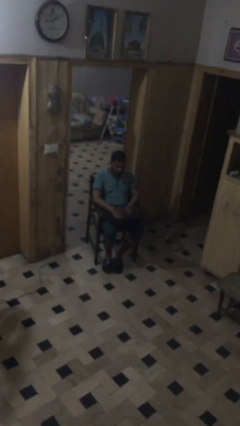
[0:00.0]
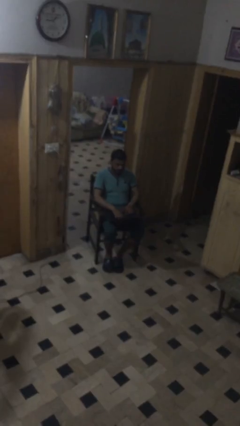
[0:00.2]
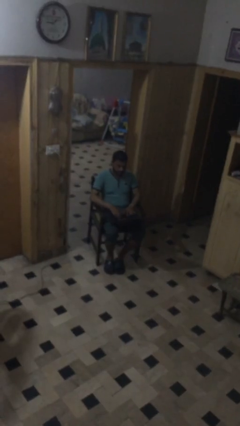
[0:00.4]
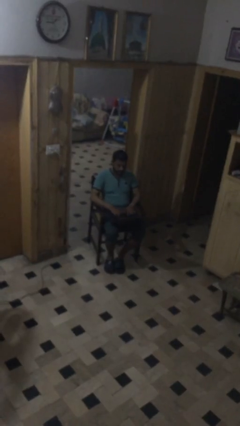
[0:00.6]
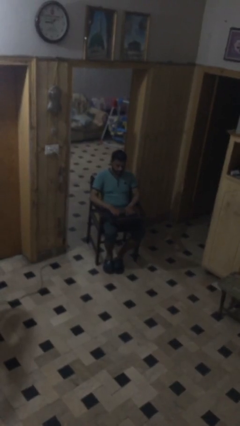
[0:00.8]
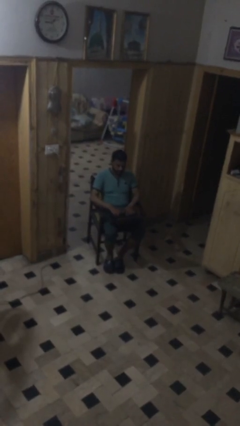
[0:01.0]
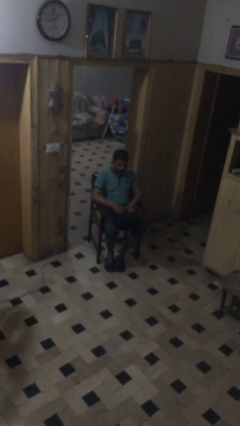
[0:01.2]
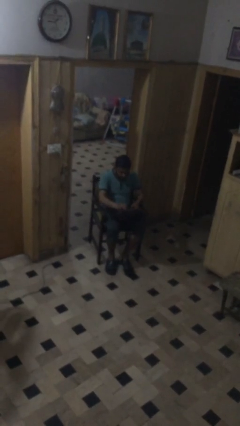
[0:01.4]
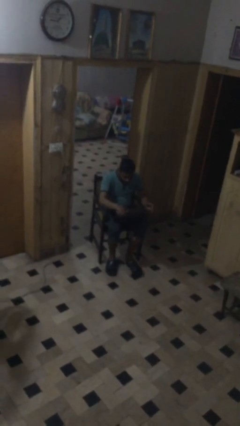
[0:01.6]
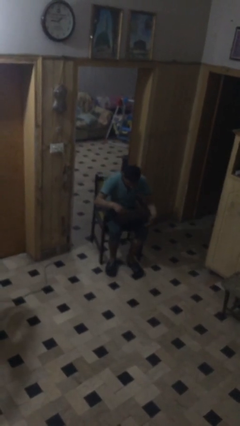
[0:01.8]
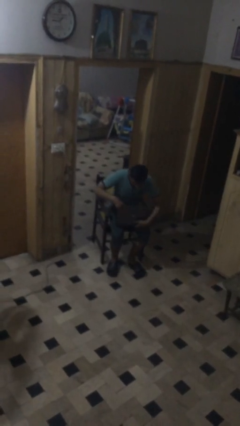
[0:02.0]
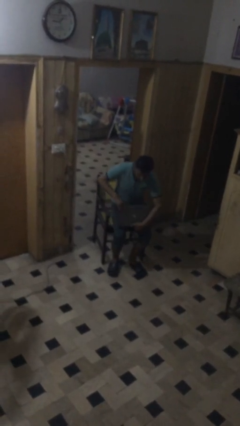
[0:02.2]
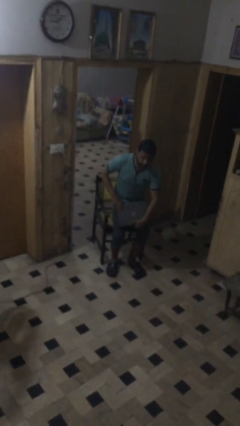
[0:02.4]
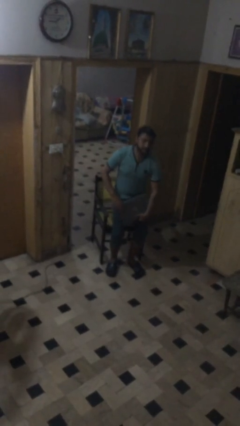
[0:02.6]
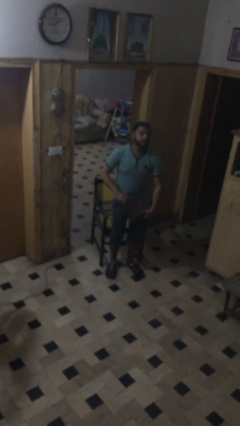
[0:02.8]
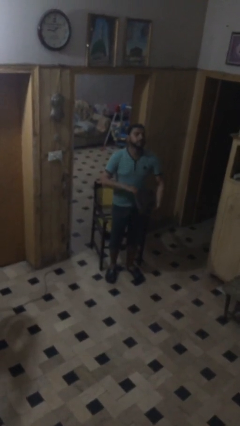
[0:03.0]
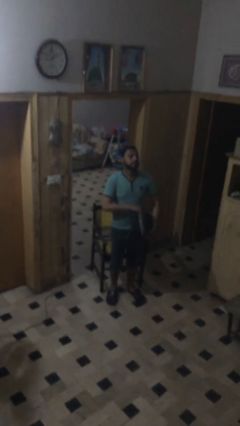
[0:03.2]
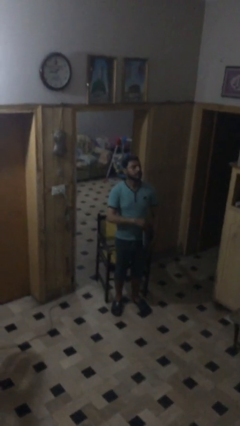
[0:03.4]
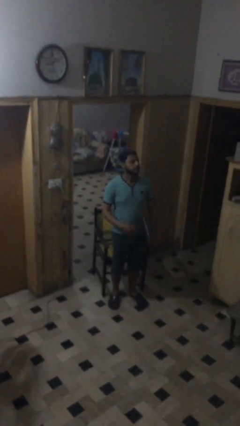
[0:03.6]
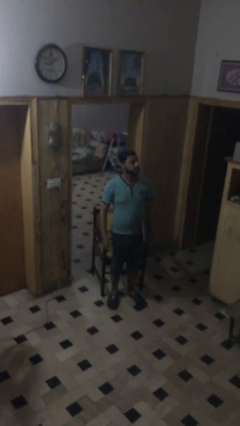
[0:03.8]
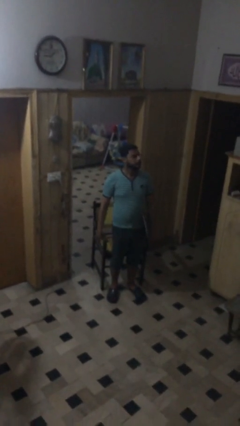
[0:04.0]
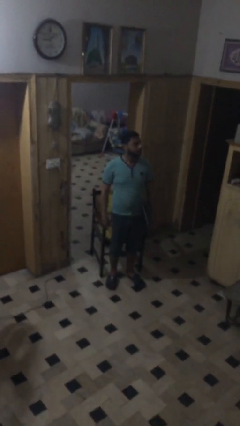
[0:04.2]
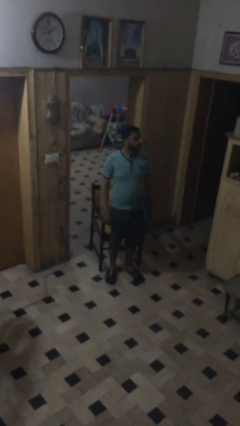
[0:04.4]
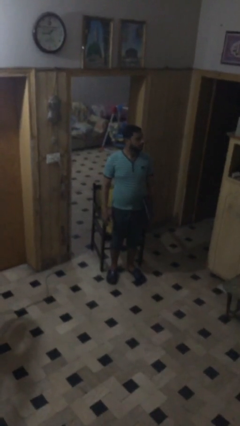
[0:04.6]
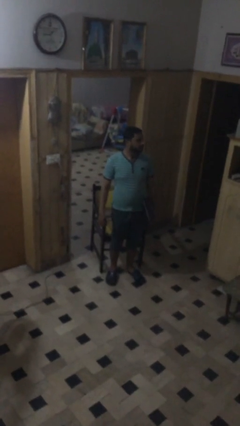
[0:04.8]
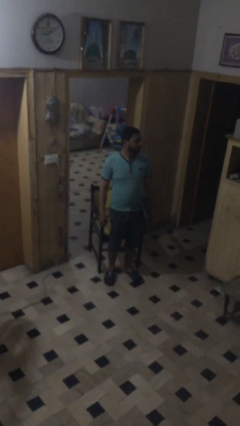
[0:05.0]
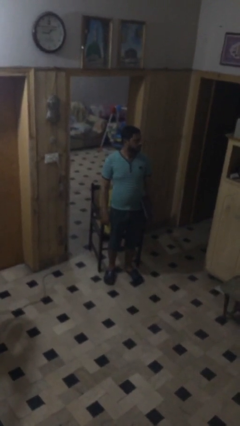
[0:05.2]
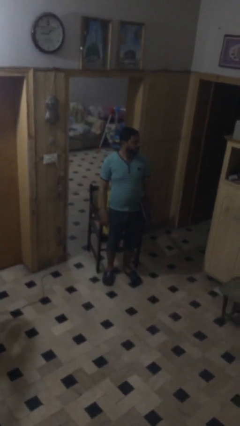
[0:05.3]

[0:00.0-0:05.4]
person stands up

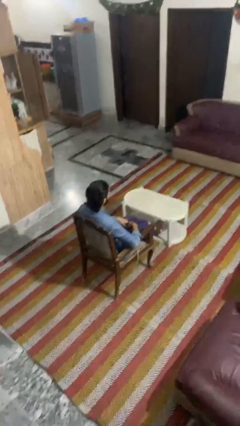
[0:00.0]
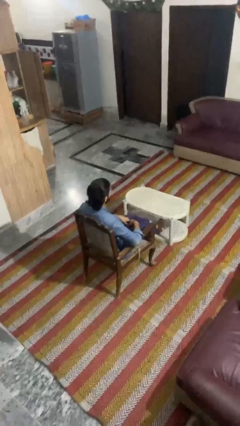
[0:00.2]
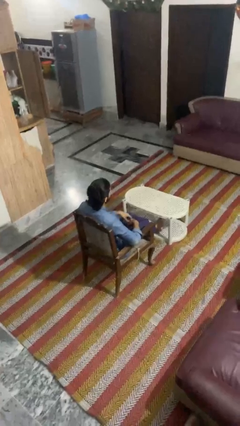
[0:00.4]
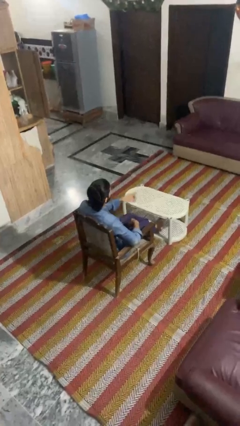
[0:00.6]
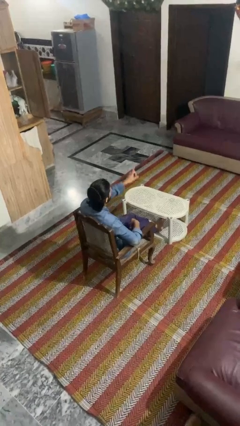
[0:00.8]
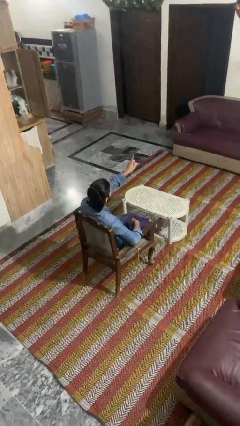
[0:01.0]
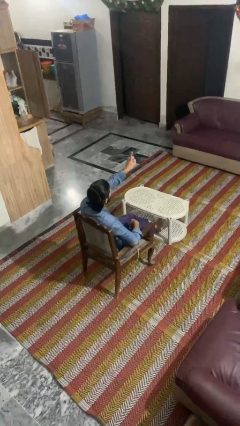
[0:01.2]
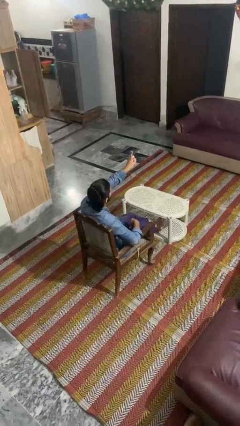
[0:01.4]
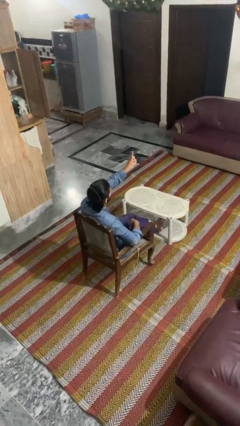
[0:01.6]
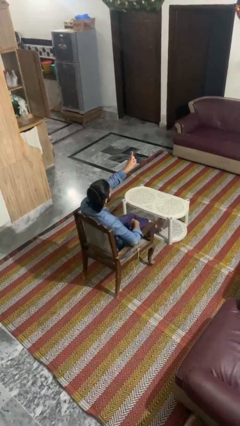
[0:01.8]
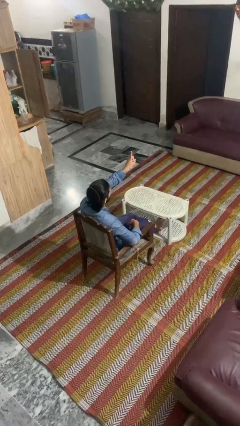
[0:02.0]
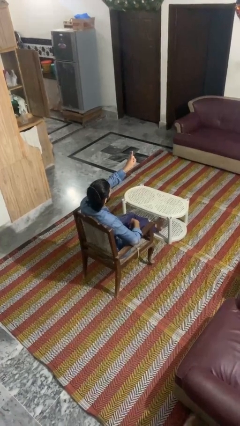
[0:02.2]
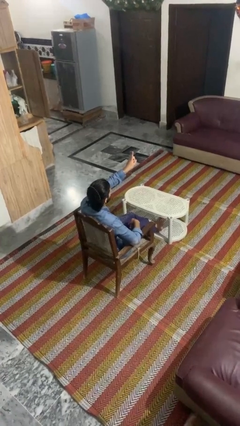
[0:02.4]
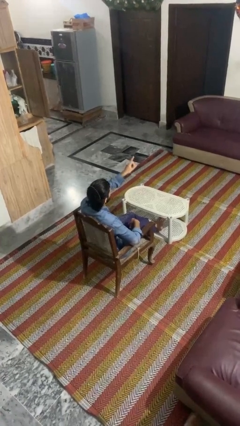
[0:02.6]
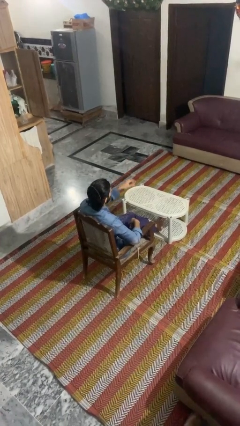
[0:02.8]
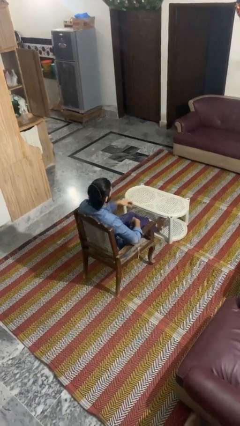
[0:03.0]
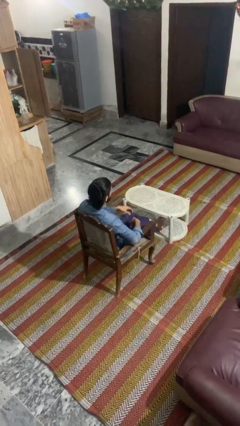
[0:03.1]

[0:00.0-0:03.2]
person gestures number one

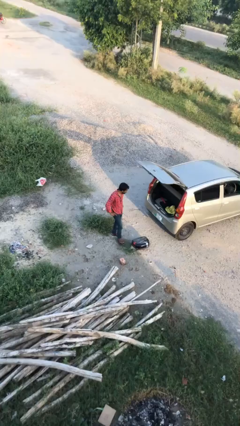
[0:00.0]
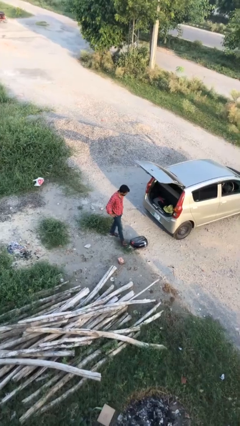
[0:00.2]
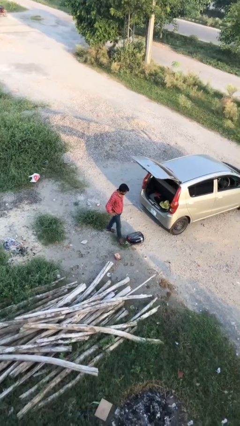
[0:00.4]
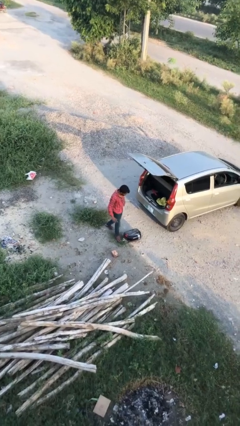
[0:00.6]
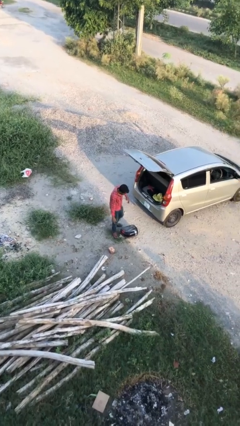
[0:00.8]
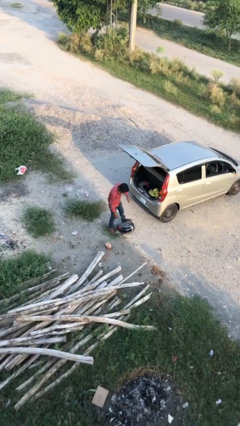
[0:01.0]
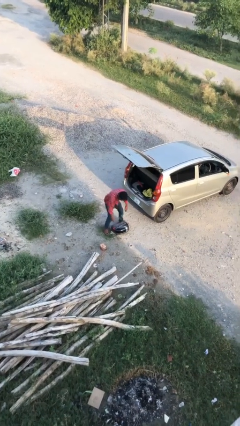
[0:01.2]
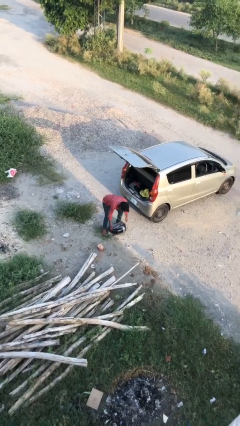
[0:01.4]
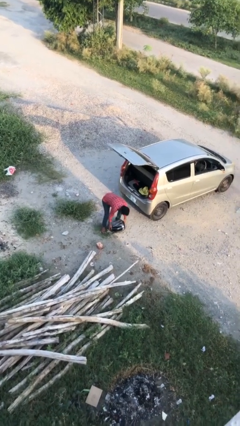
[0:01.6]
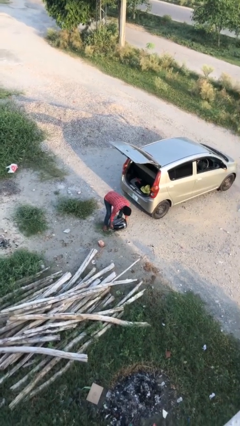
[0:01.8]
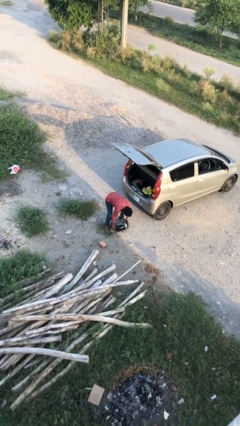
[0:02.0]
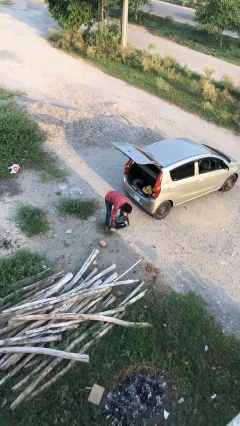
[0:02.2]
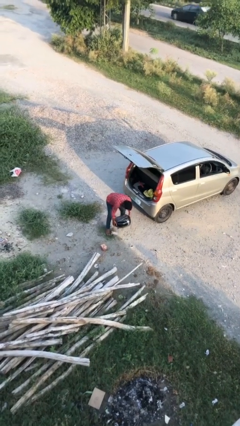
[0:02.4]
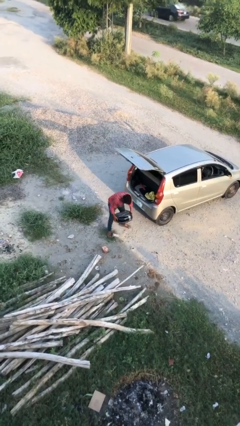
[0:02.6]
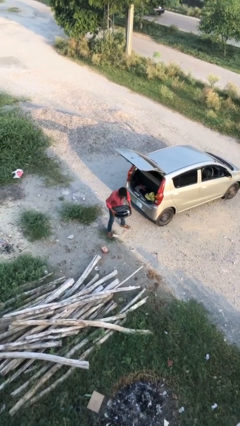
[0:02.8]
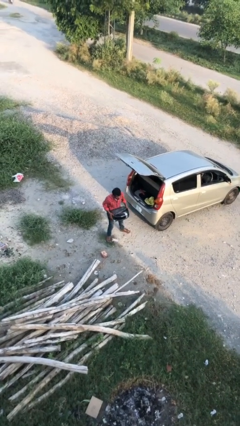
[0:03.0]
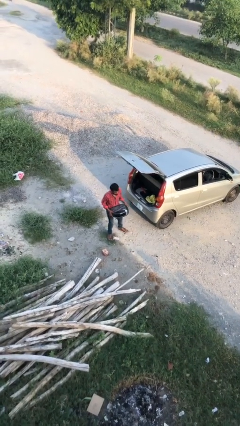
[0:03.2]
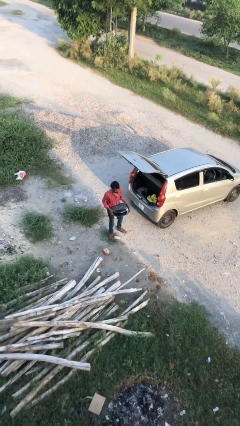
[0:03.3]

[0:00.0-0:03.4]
person picks up object from floor

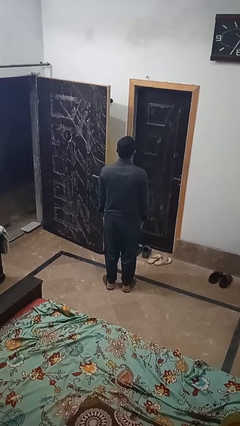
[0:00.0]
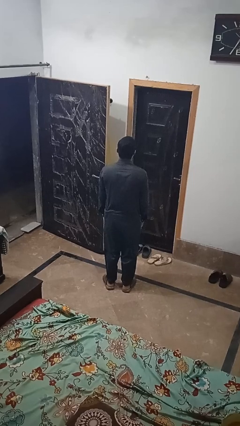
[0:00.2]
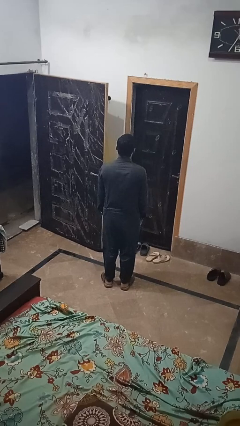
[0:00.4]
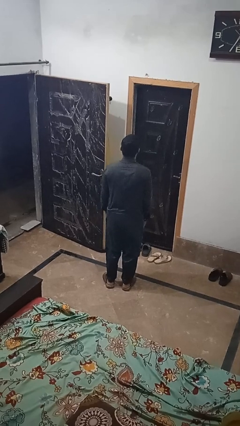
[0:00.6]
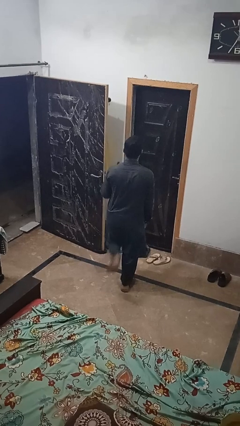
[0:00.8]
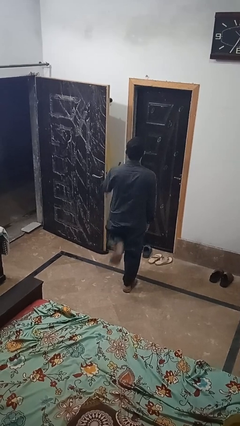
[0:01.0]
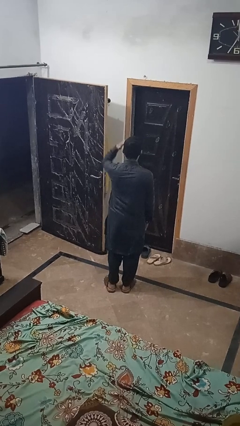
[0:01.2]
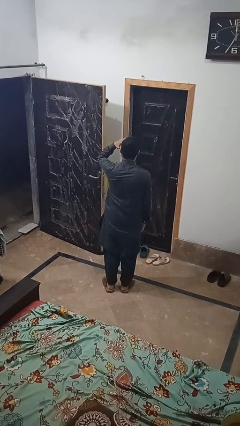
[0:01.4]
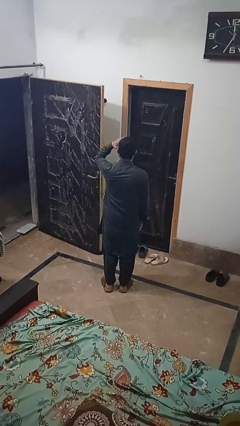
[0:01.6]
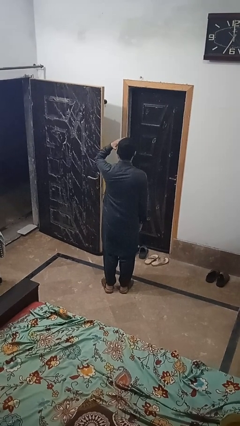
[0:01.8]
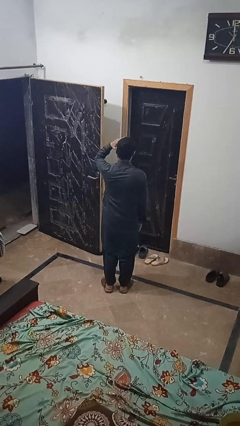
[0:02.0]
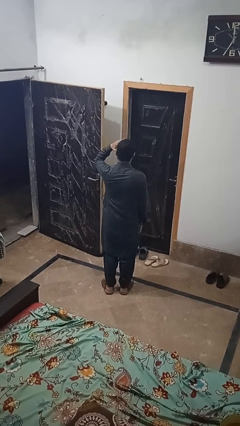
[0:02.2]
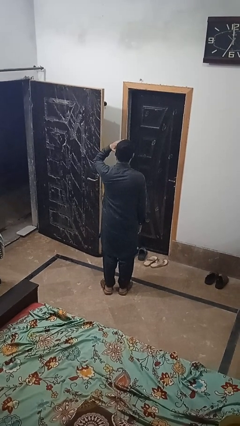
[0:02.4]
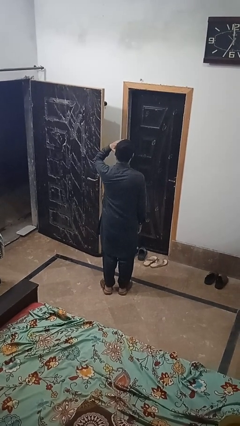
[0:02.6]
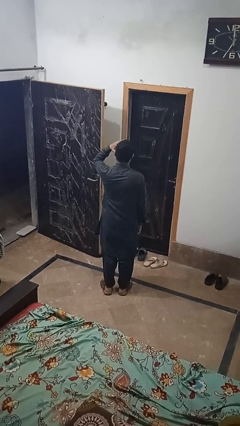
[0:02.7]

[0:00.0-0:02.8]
person salutes

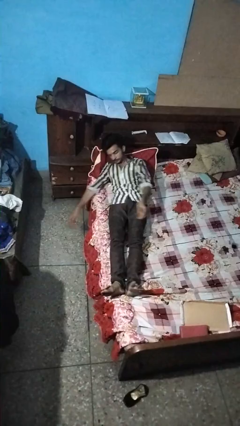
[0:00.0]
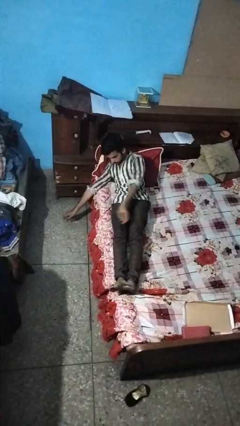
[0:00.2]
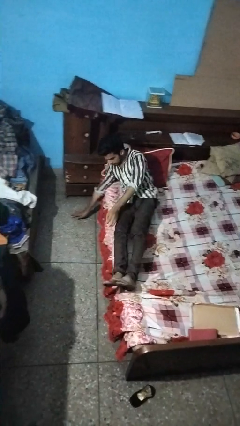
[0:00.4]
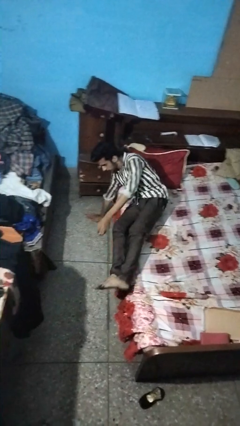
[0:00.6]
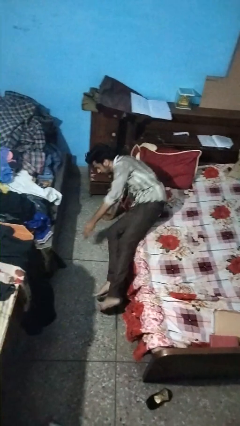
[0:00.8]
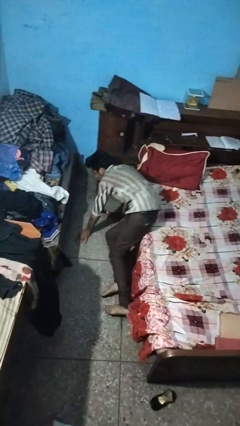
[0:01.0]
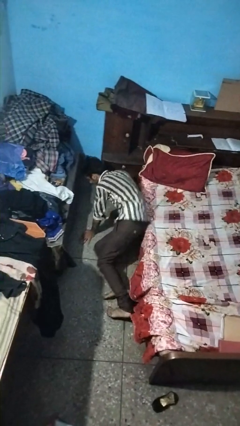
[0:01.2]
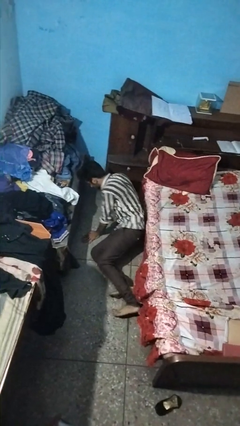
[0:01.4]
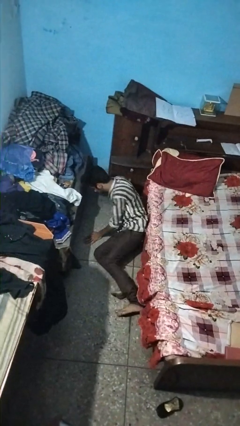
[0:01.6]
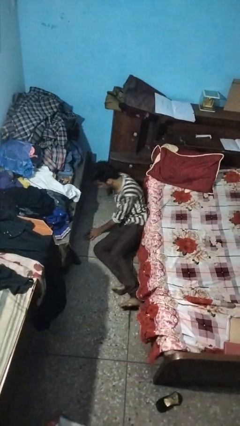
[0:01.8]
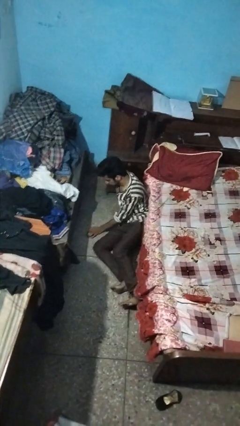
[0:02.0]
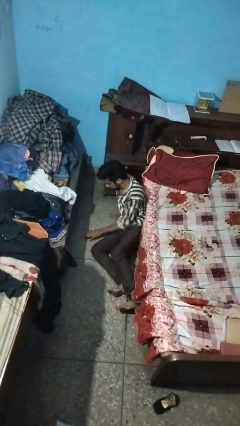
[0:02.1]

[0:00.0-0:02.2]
person falls from bed

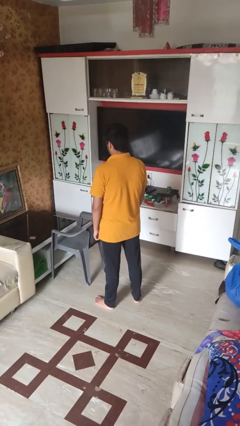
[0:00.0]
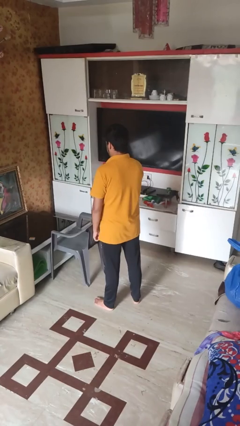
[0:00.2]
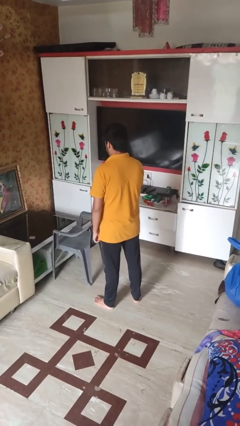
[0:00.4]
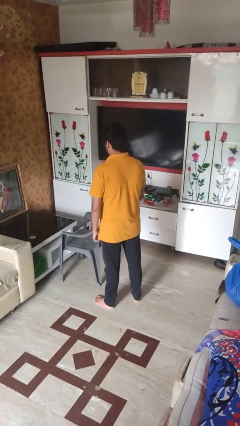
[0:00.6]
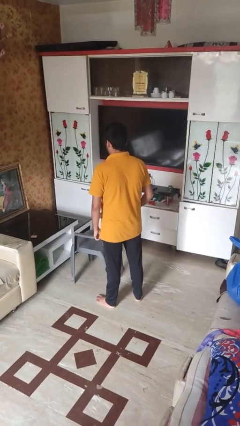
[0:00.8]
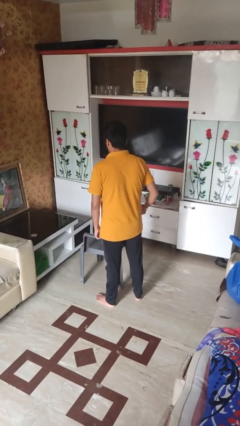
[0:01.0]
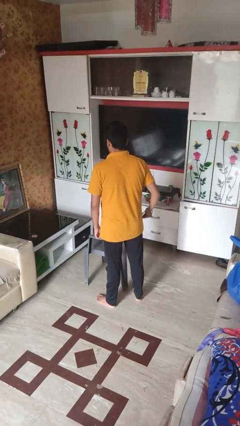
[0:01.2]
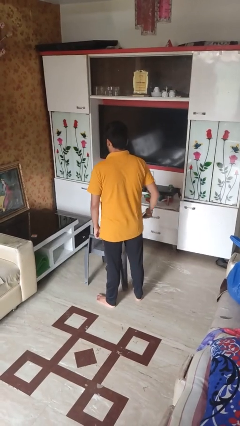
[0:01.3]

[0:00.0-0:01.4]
person pulls out chair
